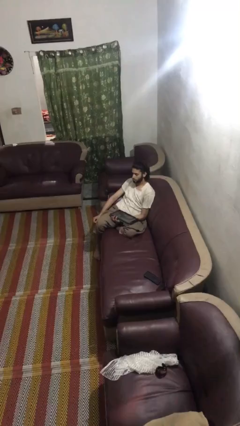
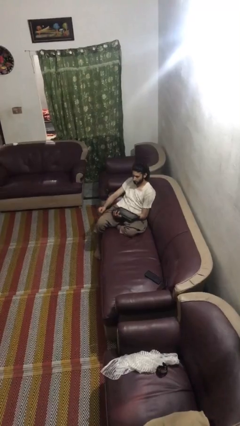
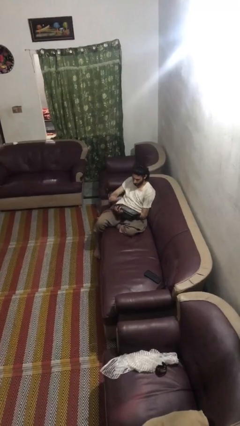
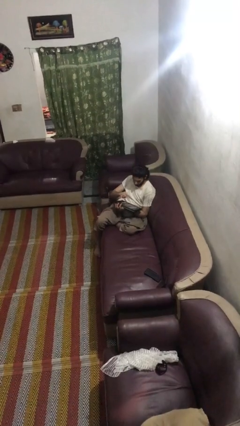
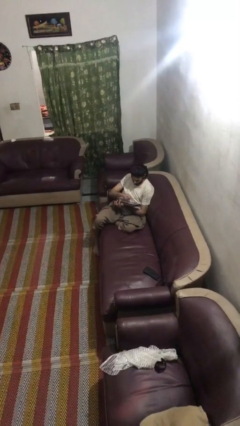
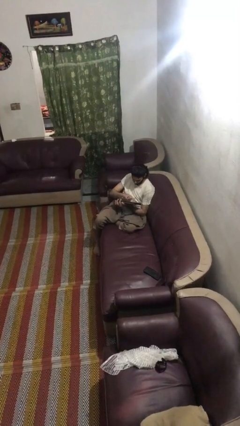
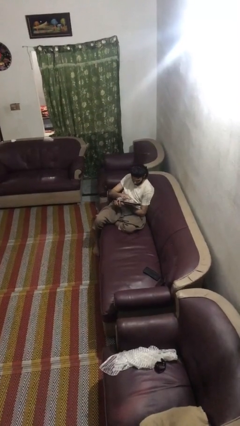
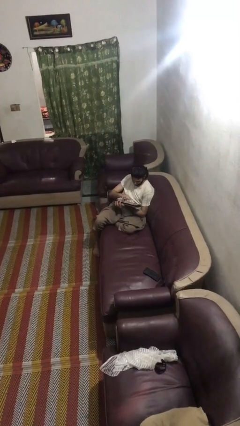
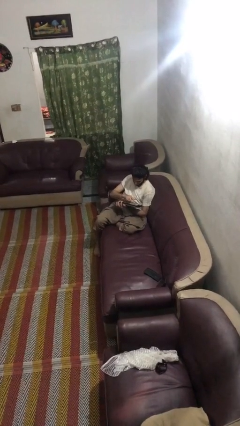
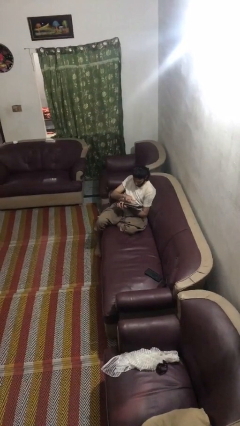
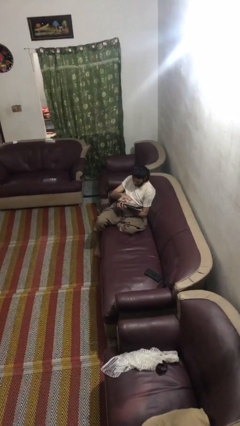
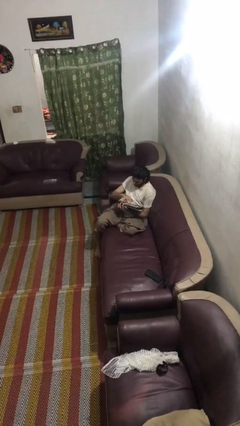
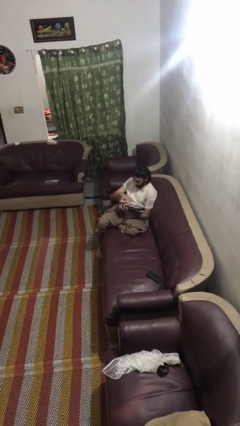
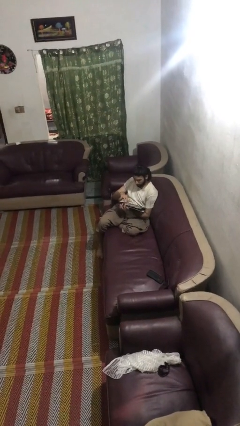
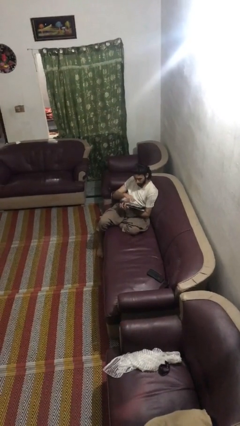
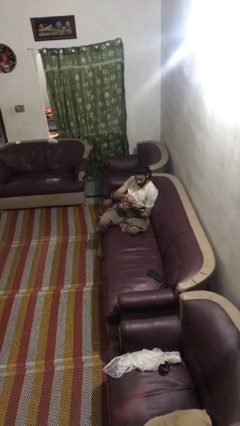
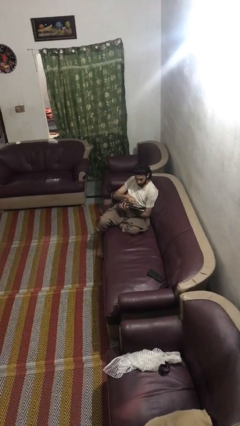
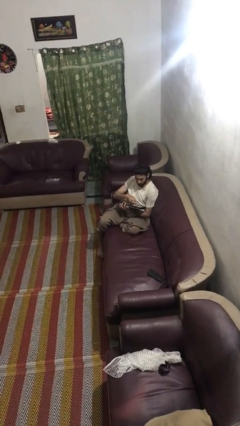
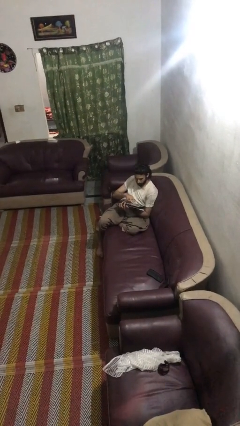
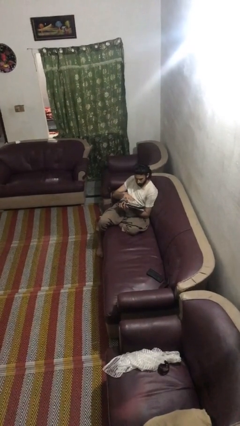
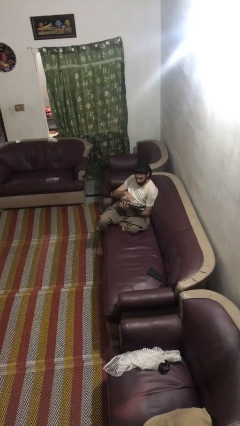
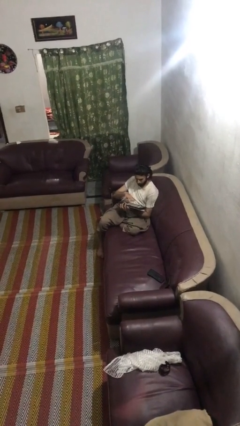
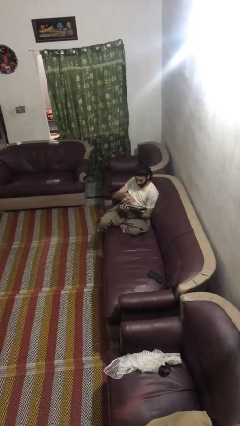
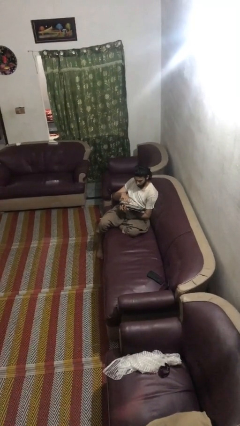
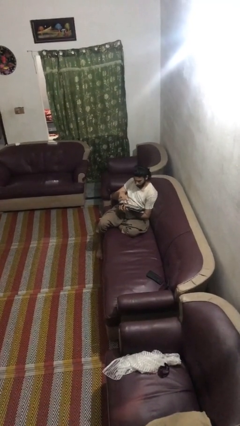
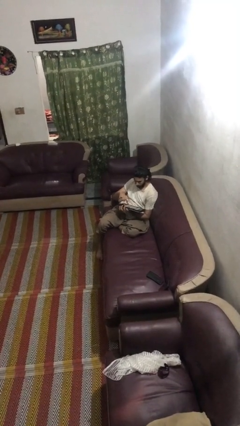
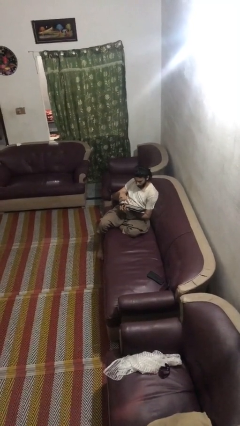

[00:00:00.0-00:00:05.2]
person interacts with tablet

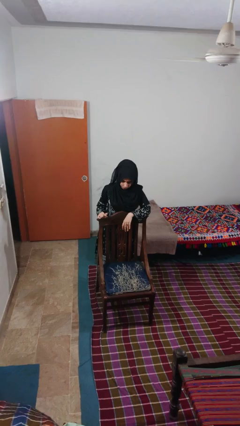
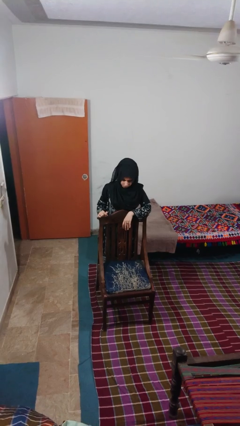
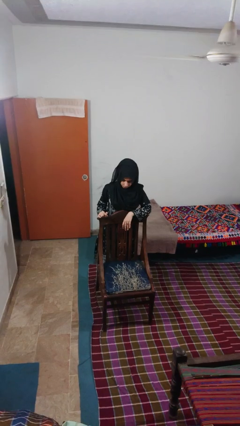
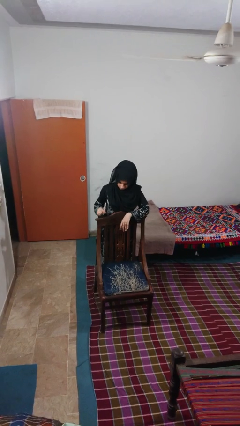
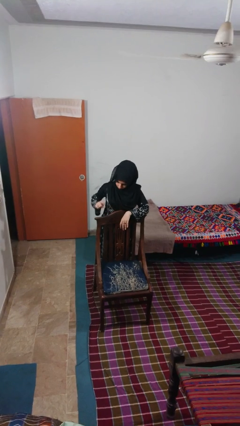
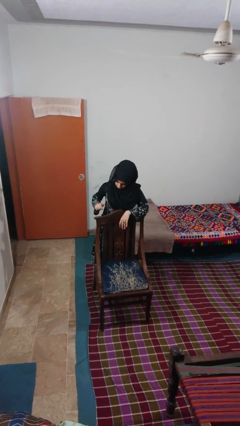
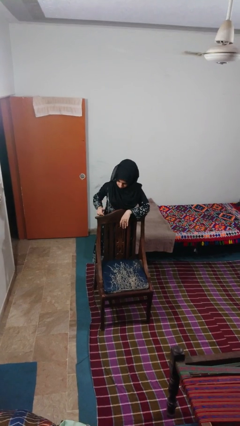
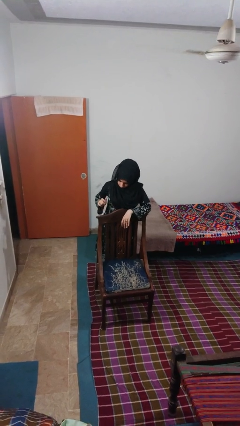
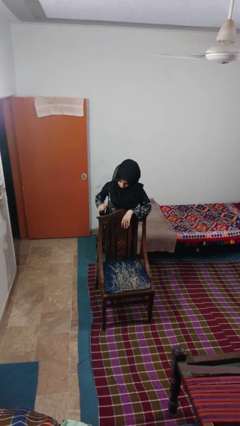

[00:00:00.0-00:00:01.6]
person taps object with finger

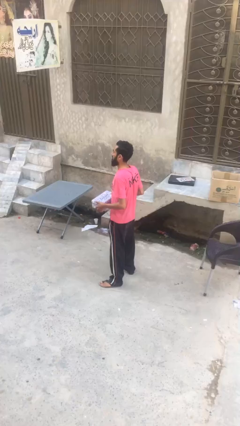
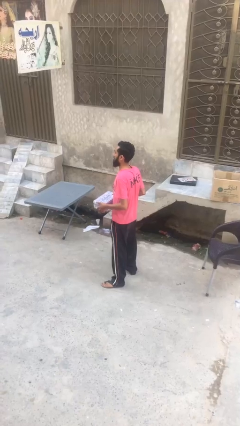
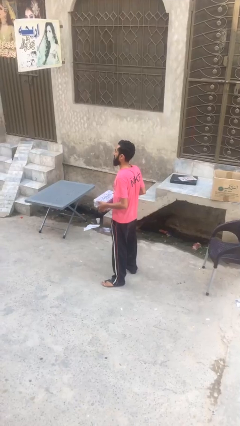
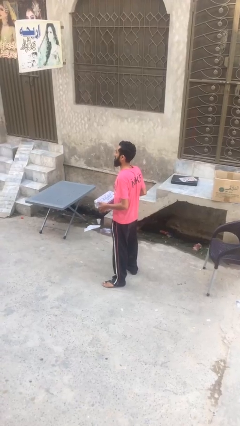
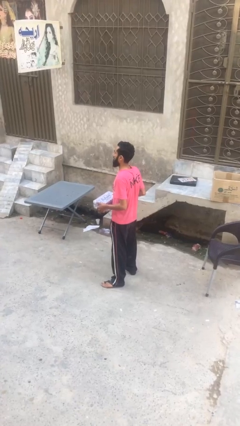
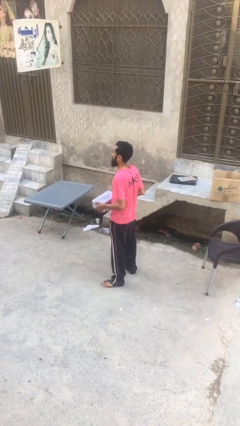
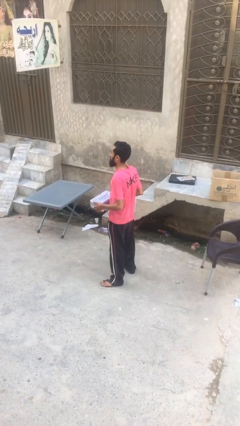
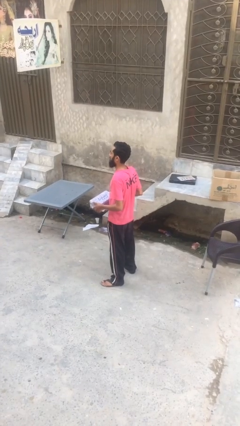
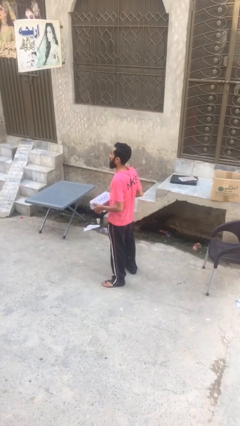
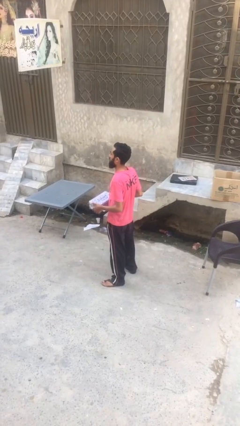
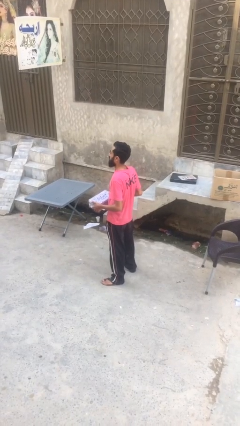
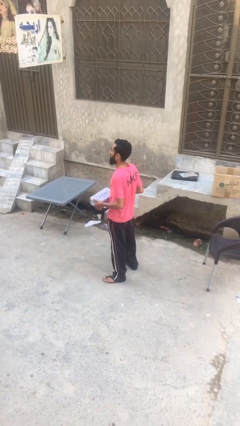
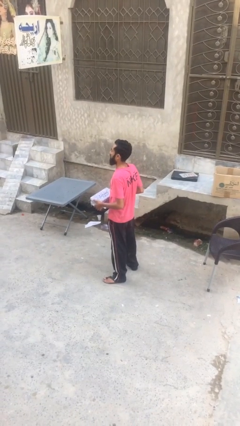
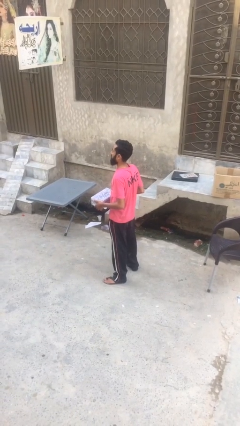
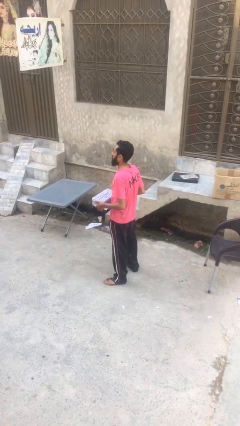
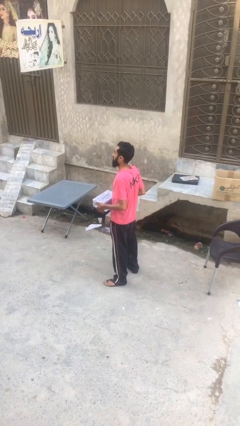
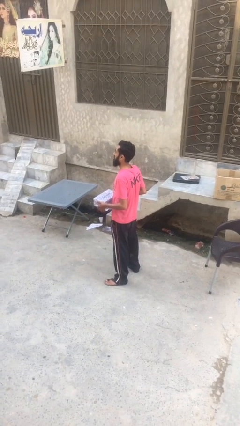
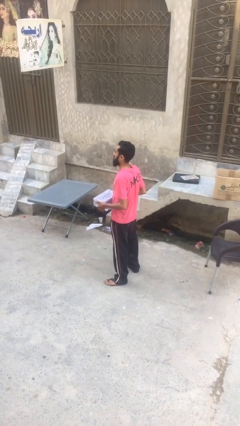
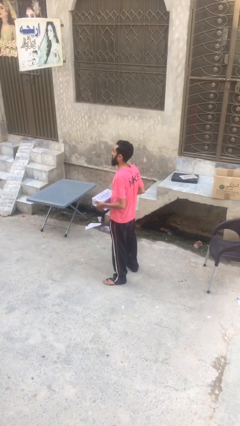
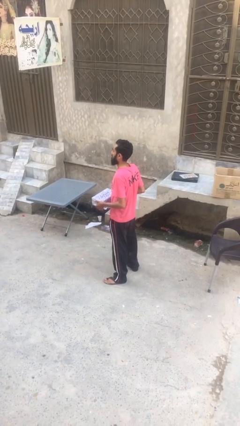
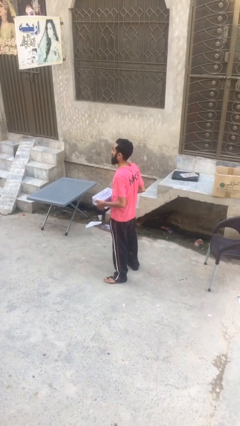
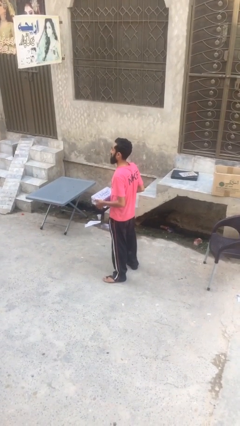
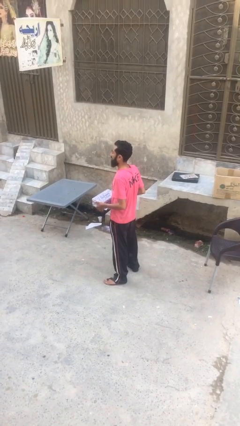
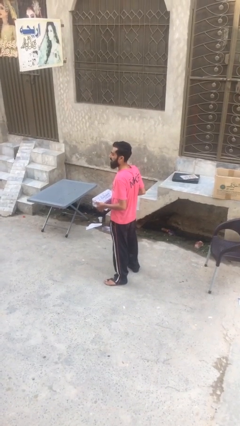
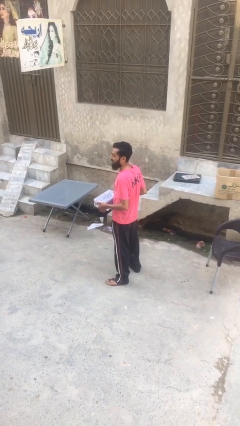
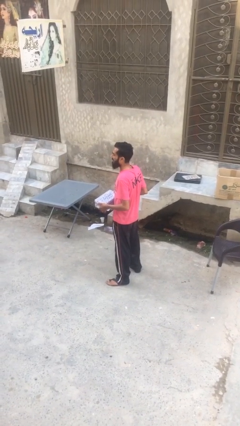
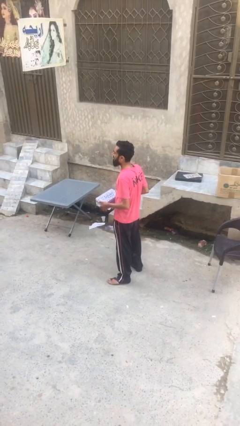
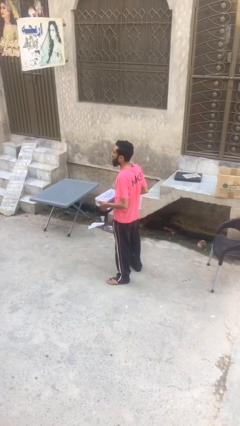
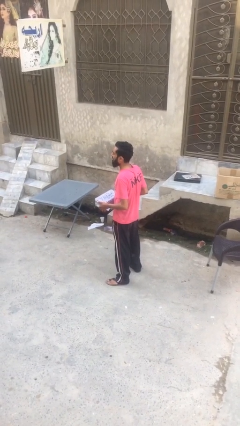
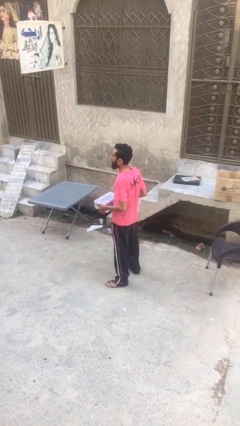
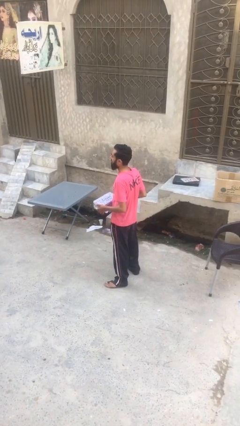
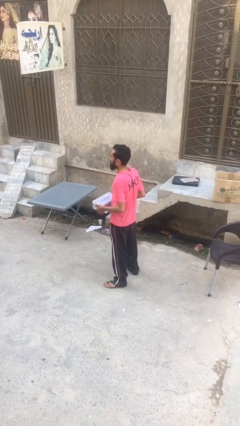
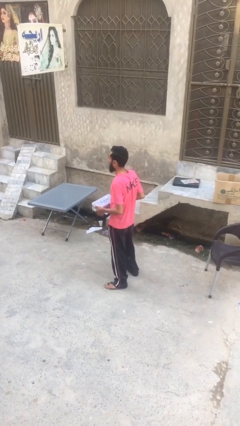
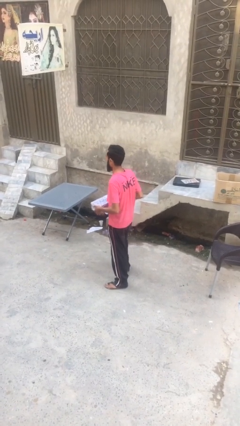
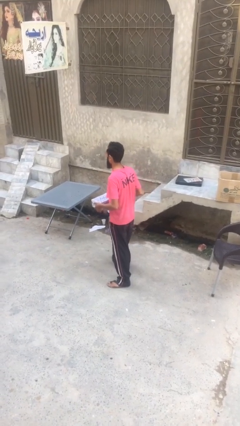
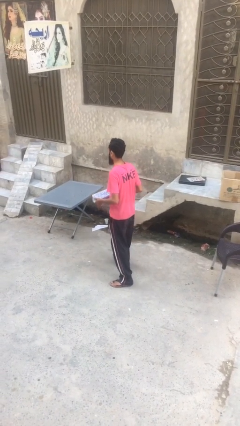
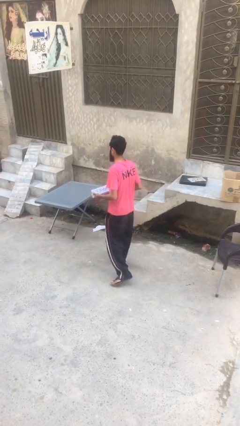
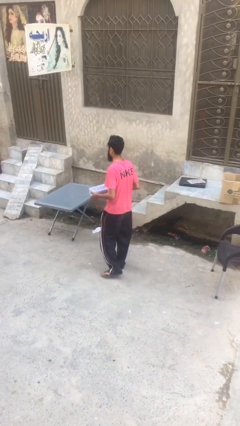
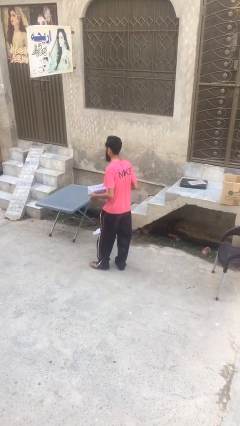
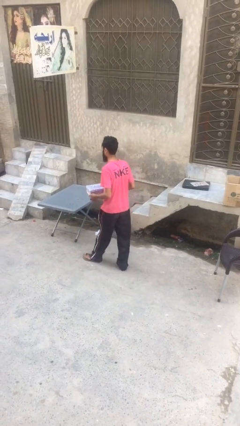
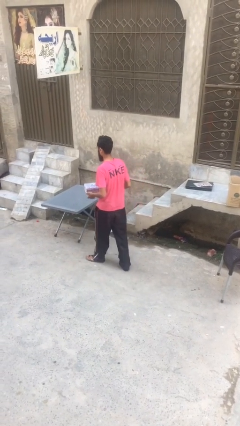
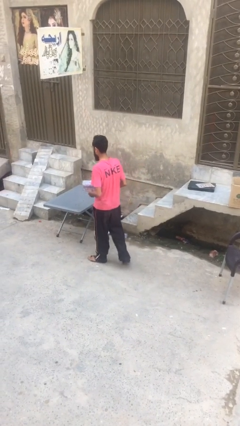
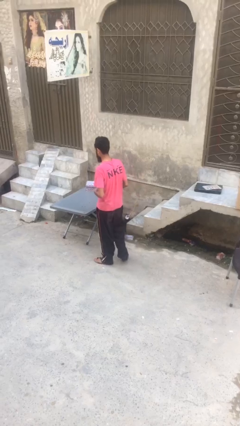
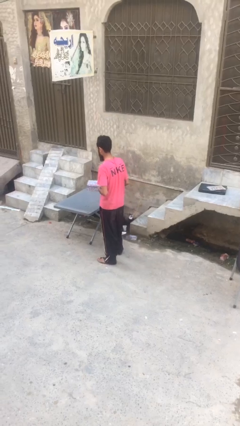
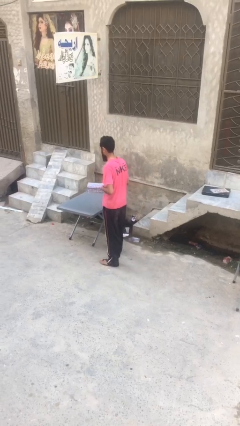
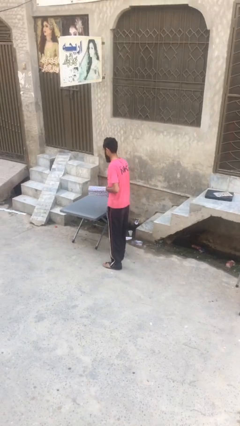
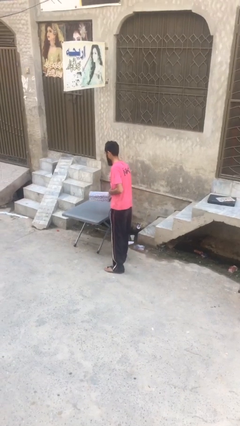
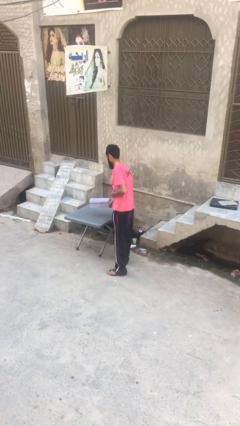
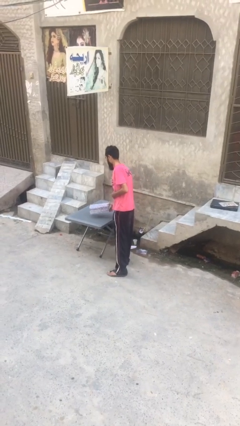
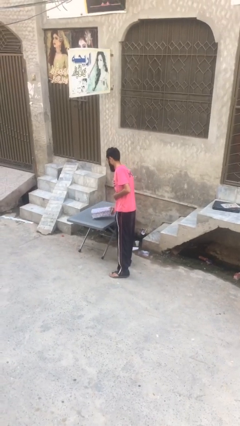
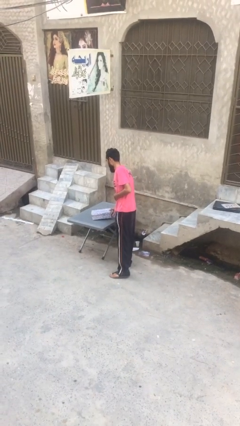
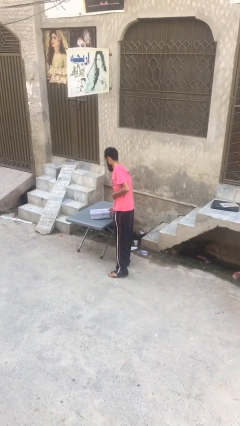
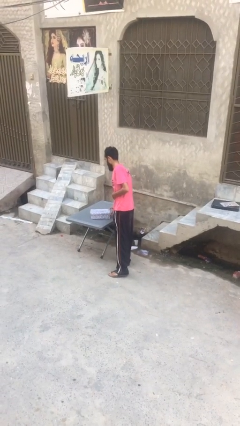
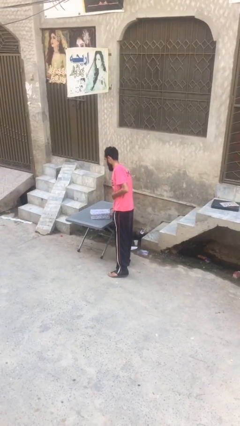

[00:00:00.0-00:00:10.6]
person puts down object on table

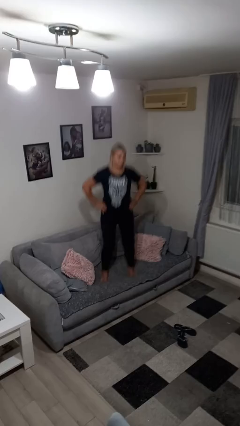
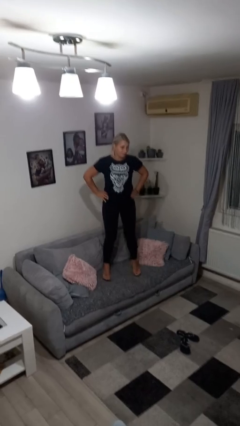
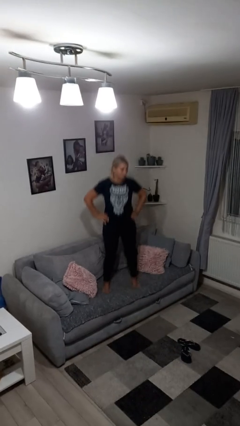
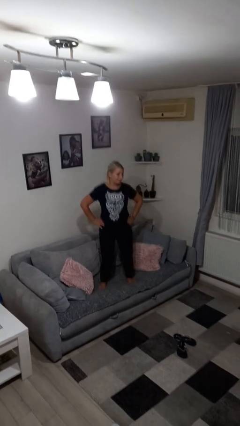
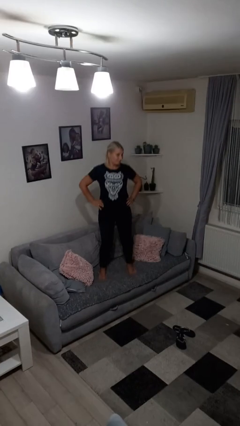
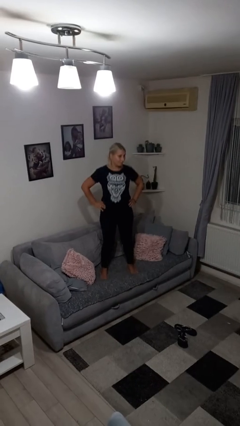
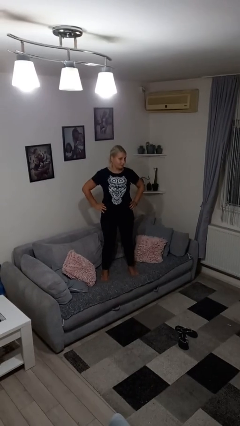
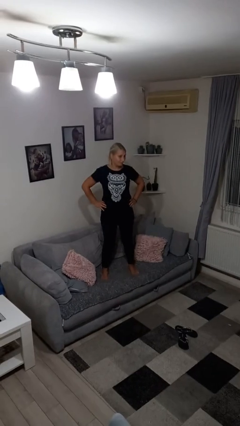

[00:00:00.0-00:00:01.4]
person jumps on couch
